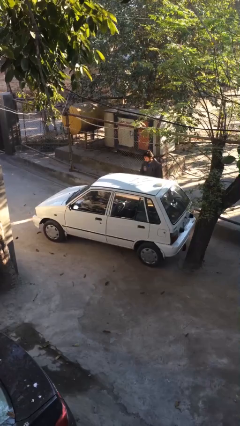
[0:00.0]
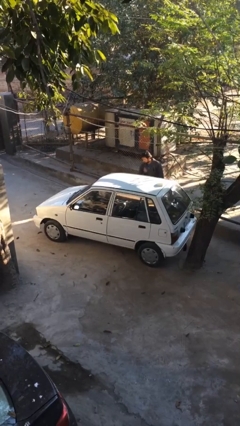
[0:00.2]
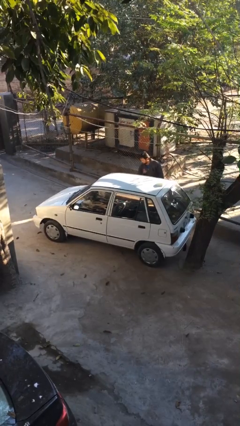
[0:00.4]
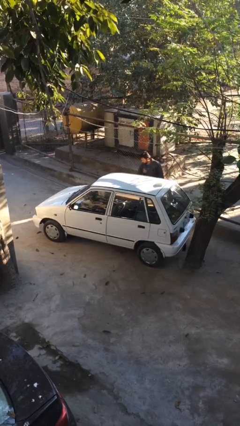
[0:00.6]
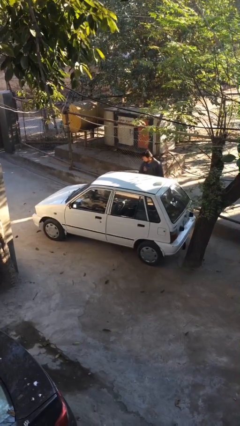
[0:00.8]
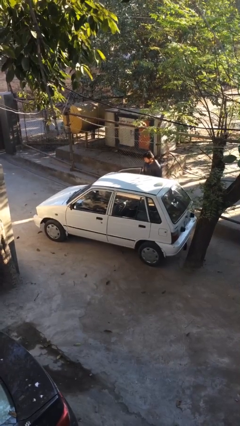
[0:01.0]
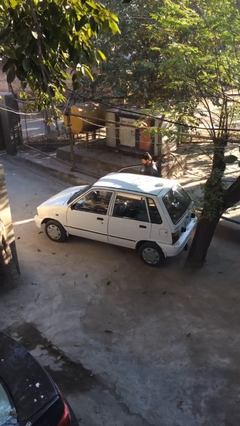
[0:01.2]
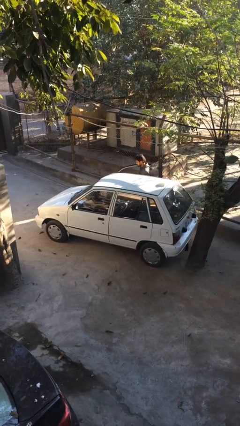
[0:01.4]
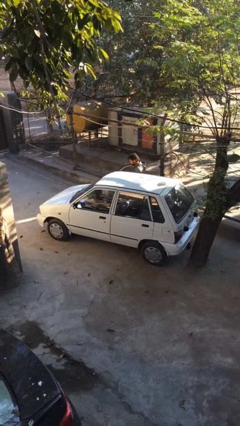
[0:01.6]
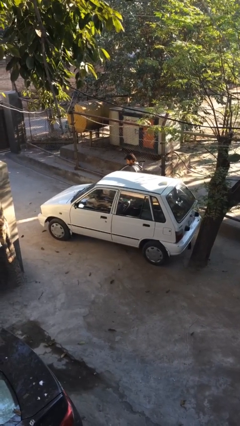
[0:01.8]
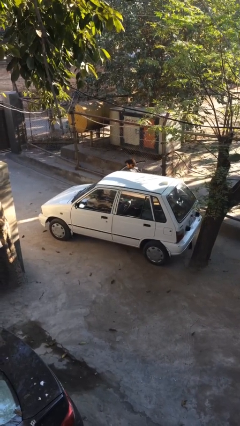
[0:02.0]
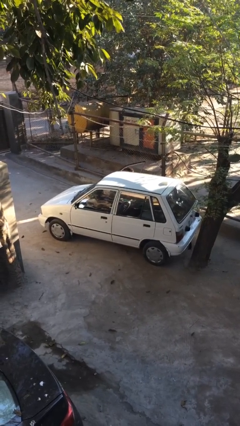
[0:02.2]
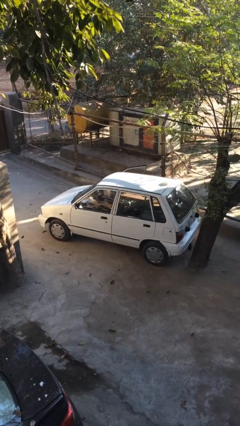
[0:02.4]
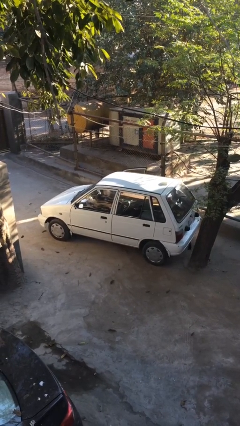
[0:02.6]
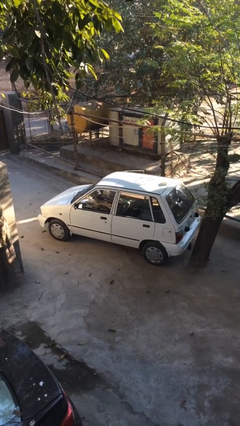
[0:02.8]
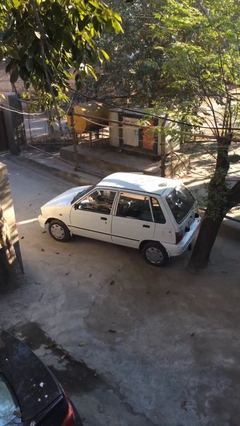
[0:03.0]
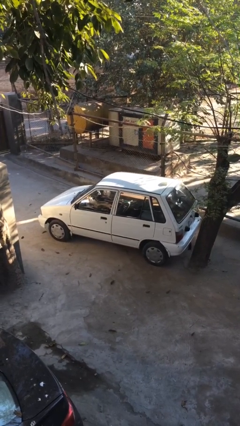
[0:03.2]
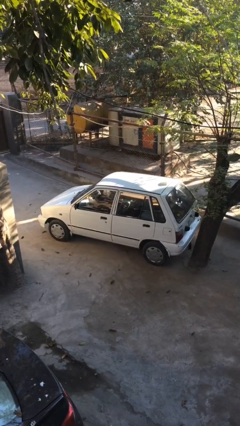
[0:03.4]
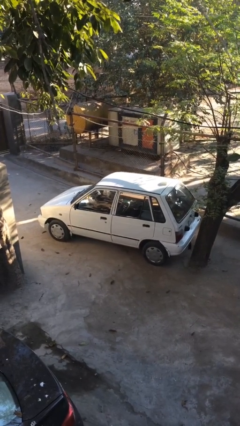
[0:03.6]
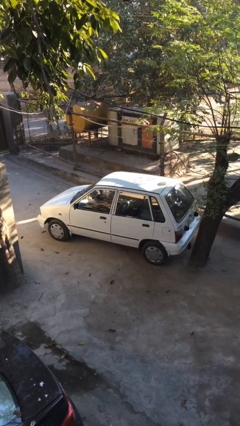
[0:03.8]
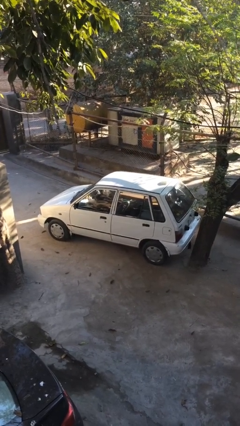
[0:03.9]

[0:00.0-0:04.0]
car picks up person

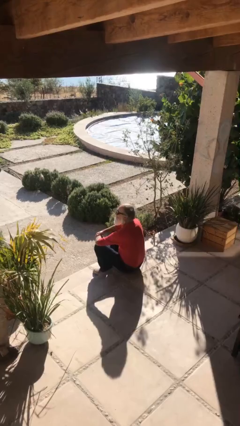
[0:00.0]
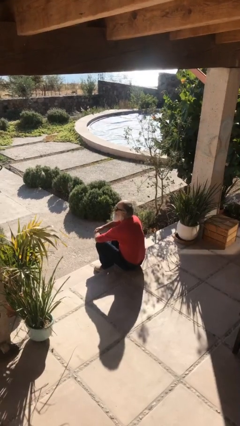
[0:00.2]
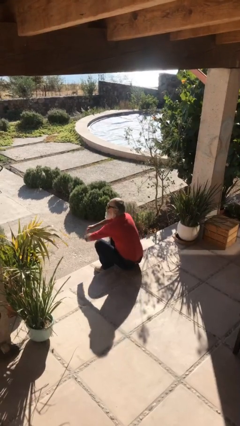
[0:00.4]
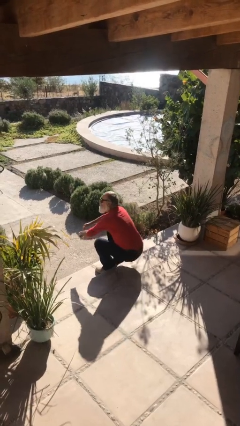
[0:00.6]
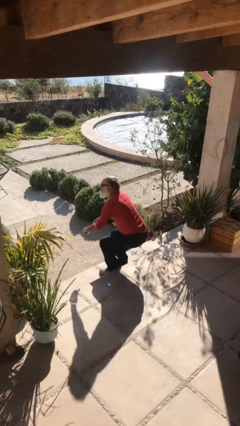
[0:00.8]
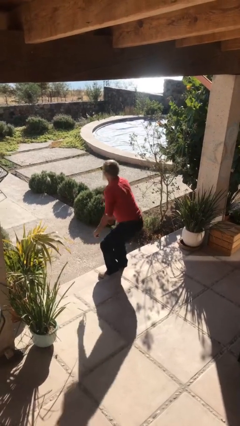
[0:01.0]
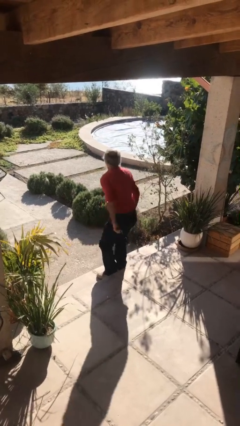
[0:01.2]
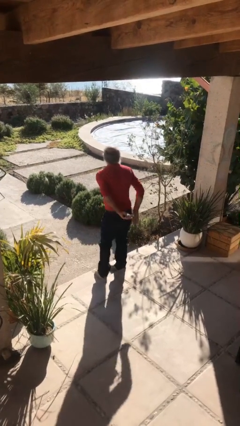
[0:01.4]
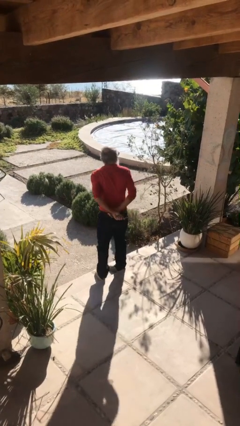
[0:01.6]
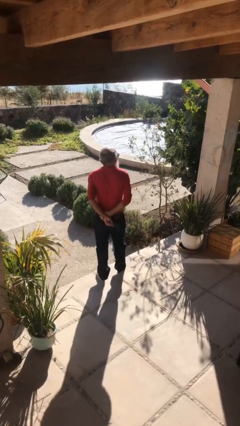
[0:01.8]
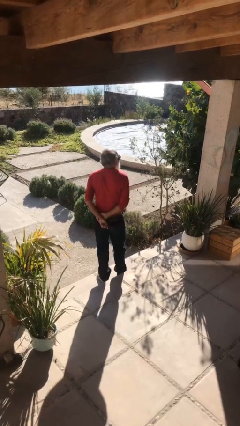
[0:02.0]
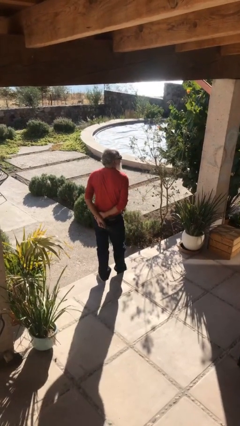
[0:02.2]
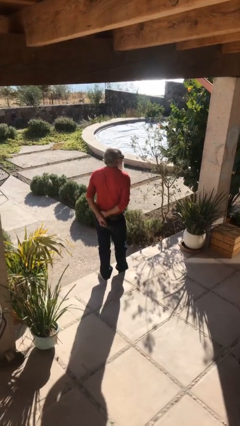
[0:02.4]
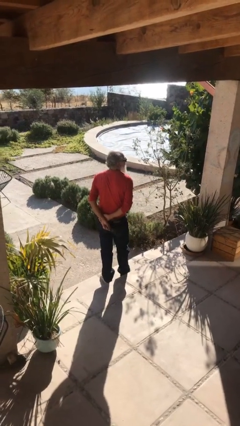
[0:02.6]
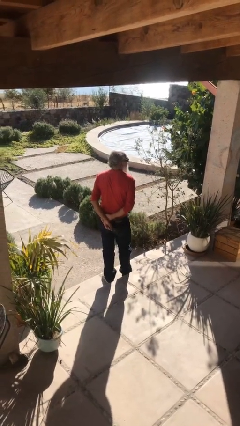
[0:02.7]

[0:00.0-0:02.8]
person stands up

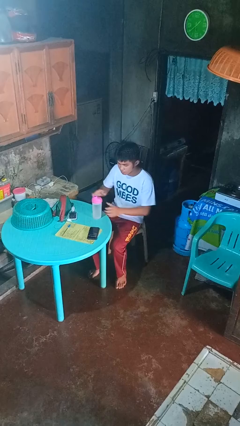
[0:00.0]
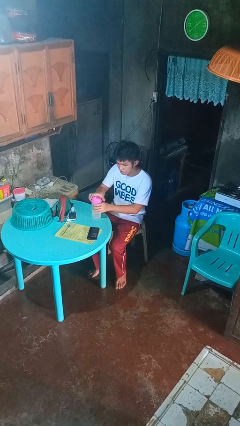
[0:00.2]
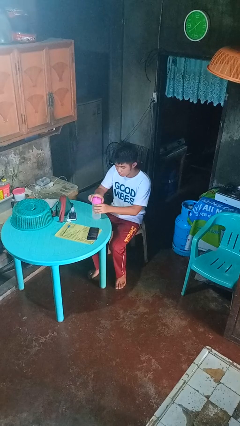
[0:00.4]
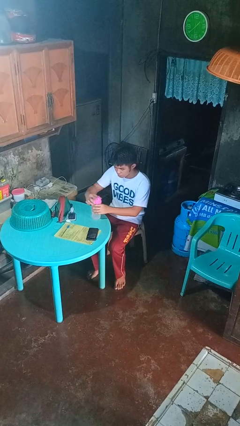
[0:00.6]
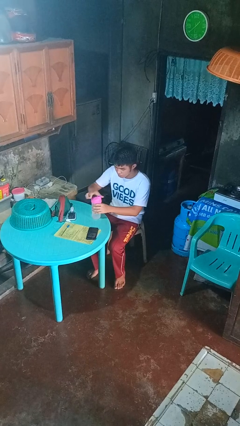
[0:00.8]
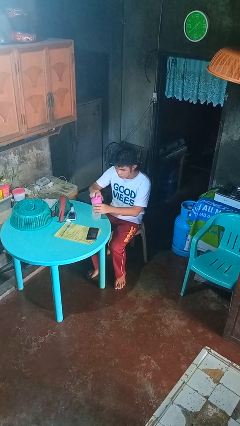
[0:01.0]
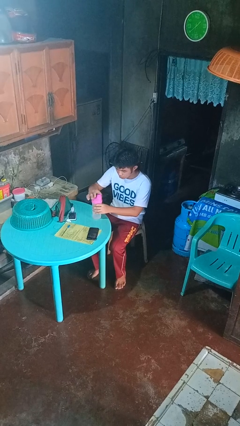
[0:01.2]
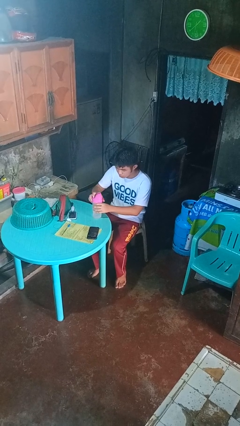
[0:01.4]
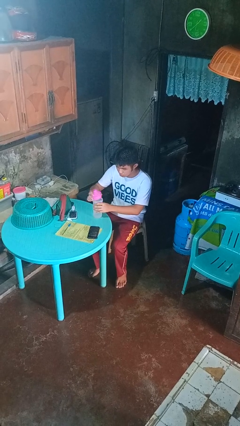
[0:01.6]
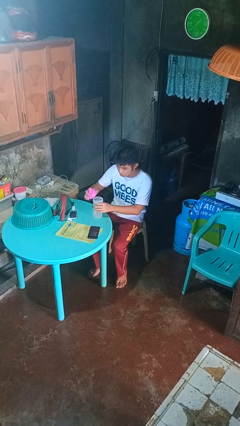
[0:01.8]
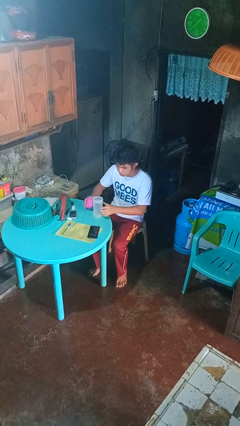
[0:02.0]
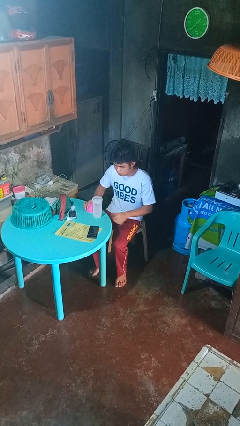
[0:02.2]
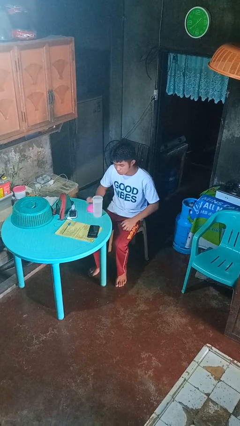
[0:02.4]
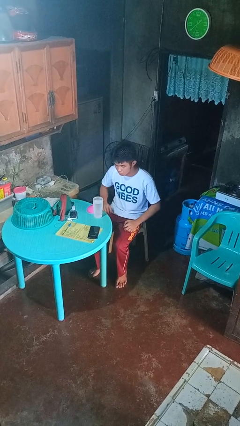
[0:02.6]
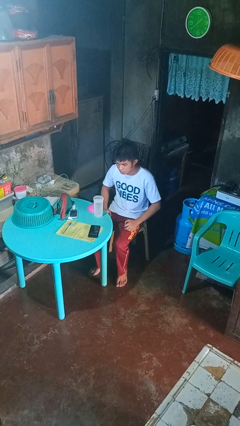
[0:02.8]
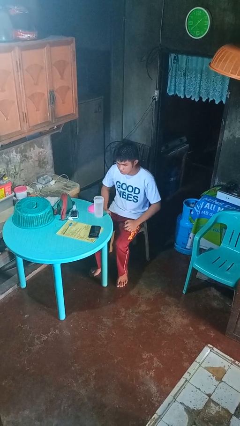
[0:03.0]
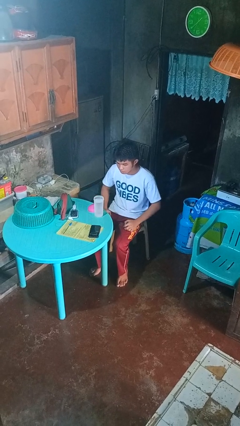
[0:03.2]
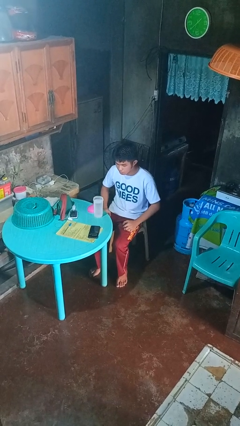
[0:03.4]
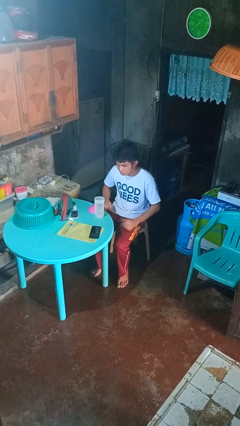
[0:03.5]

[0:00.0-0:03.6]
person unscrews lid from bottle

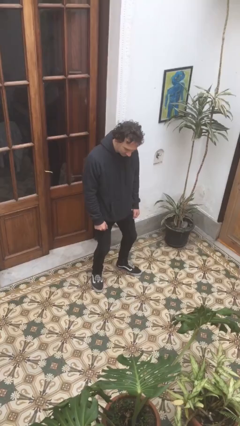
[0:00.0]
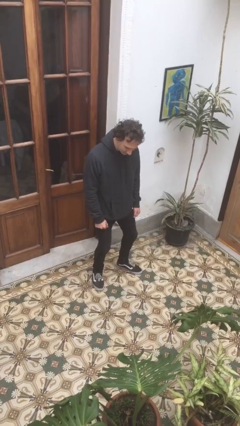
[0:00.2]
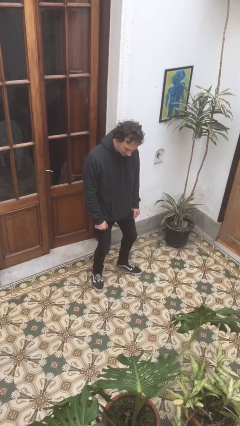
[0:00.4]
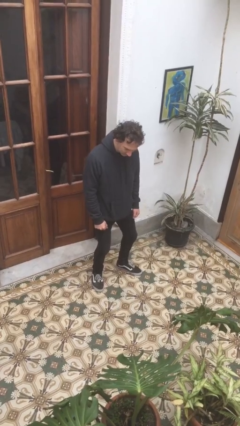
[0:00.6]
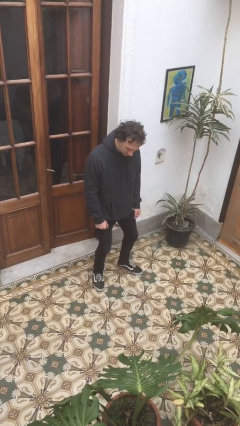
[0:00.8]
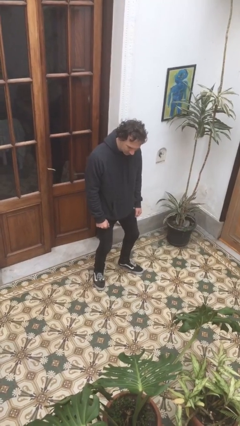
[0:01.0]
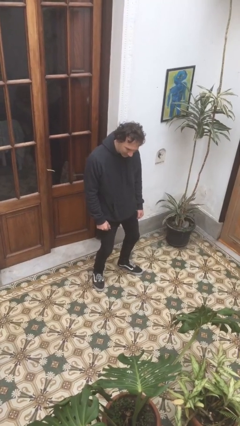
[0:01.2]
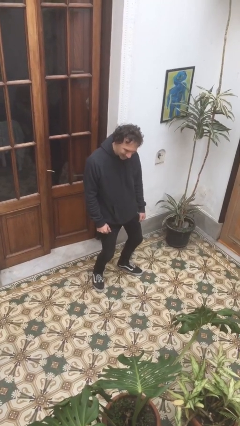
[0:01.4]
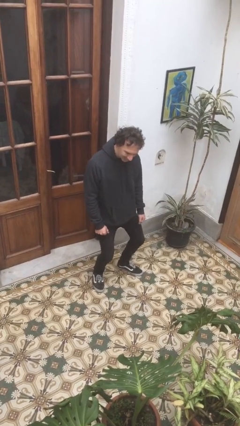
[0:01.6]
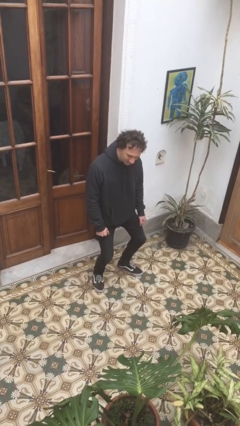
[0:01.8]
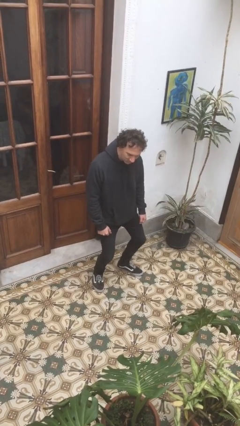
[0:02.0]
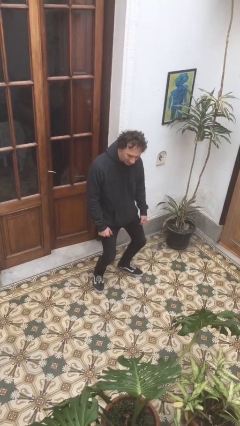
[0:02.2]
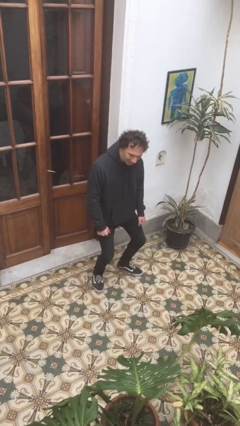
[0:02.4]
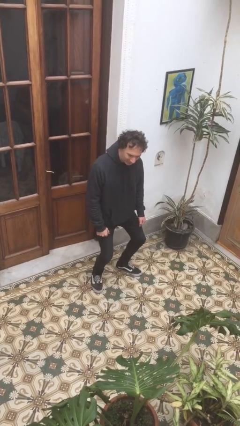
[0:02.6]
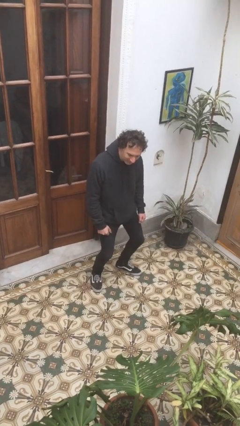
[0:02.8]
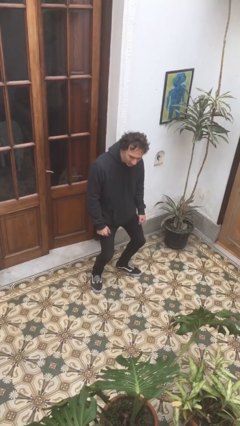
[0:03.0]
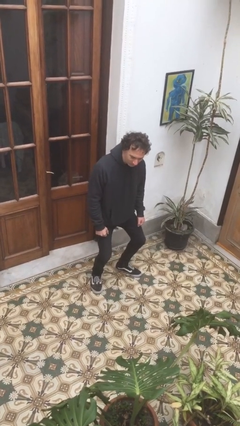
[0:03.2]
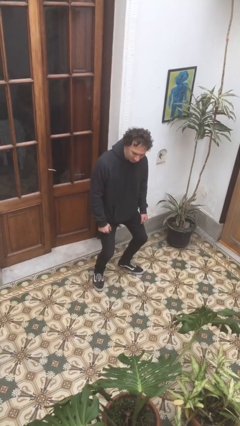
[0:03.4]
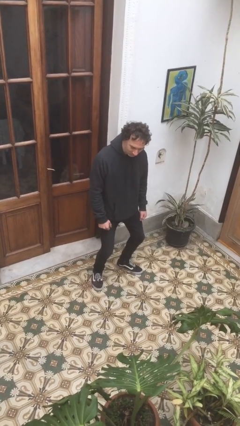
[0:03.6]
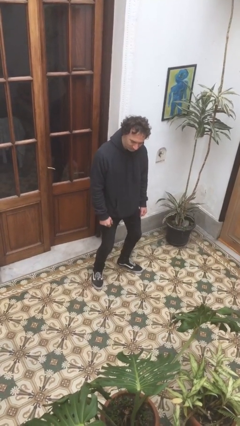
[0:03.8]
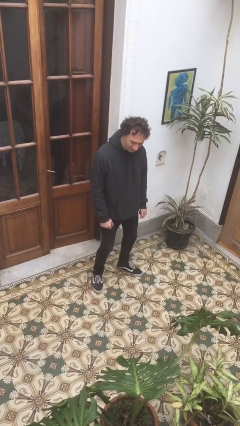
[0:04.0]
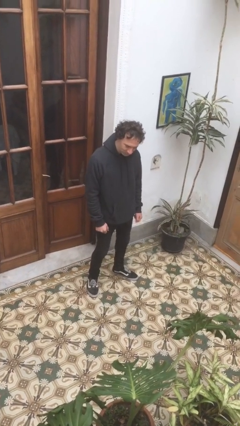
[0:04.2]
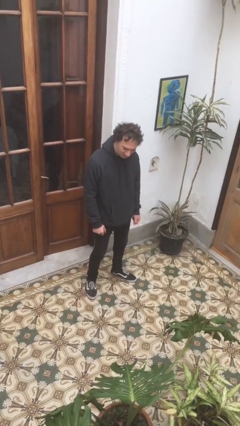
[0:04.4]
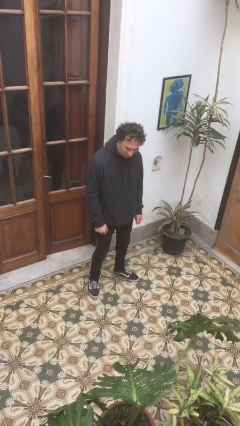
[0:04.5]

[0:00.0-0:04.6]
person wiggles hips

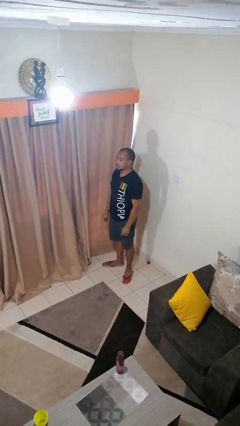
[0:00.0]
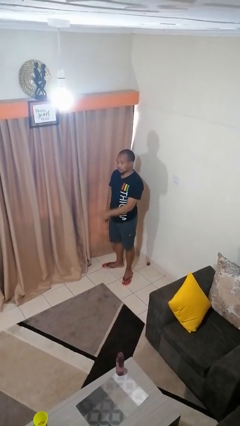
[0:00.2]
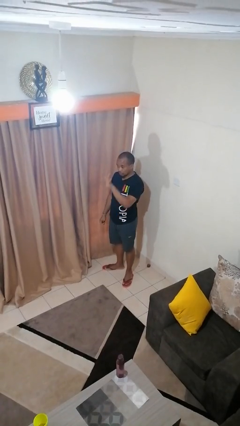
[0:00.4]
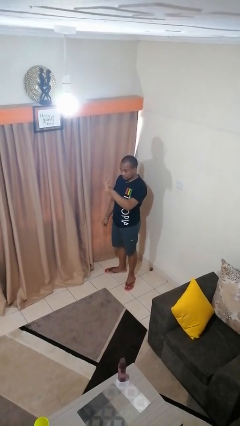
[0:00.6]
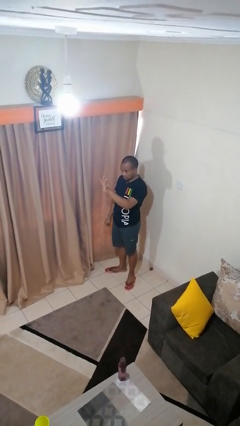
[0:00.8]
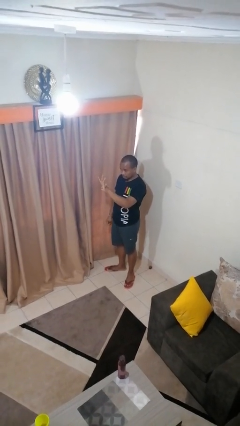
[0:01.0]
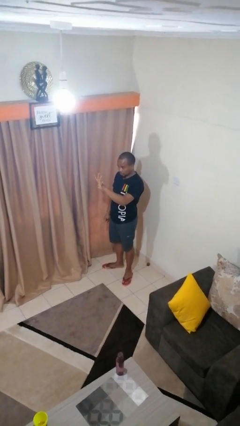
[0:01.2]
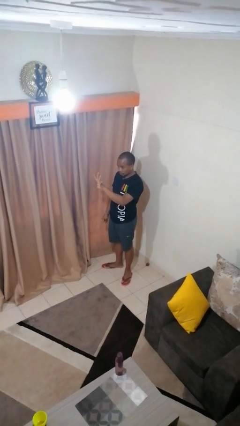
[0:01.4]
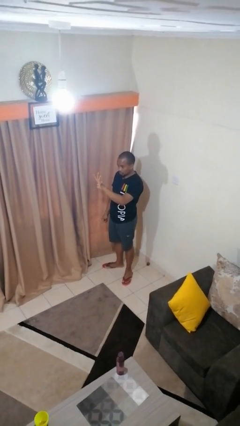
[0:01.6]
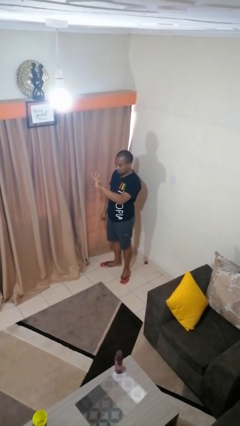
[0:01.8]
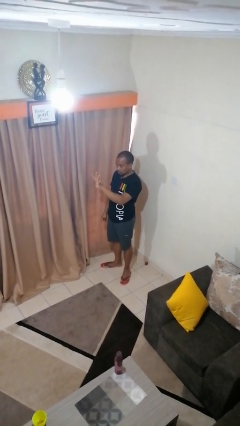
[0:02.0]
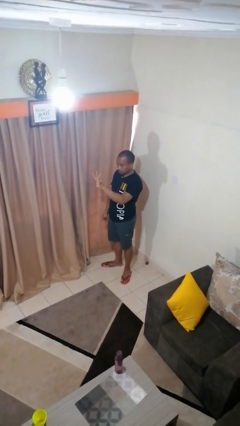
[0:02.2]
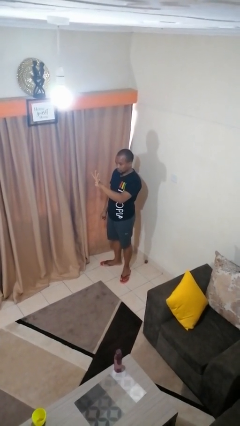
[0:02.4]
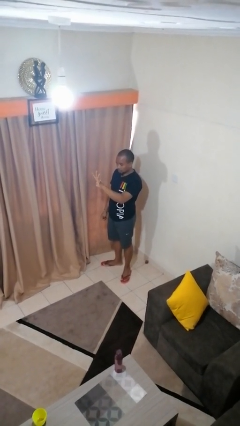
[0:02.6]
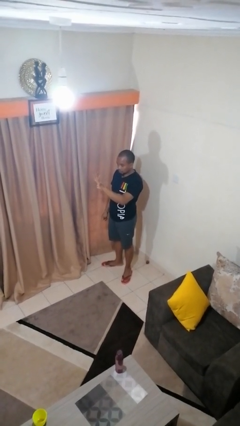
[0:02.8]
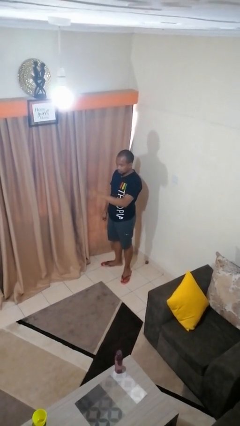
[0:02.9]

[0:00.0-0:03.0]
person gestures number four
